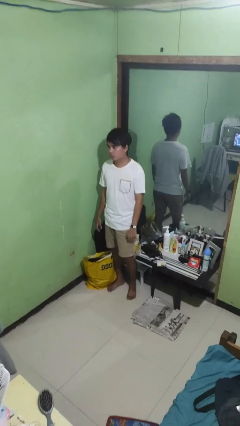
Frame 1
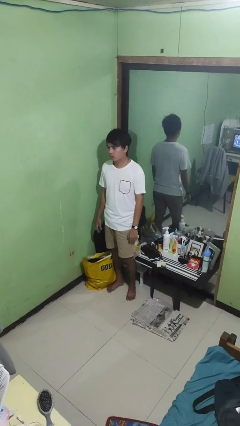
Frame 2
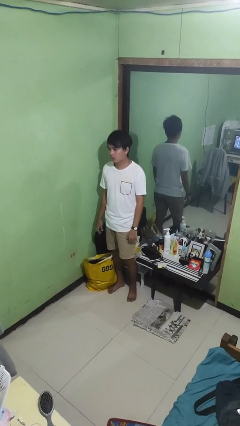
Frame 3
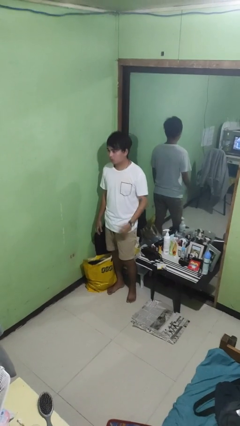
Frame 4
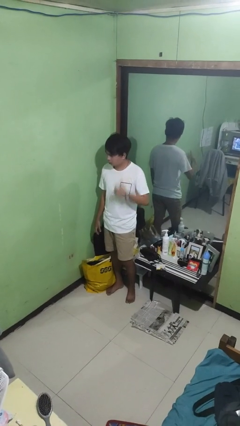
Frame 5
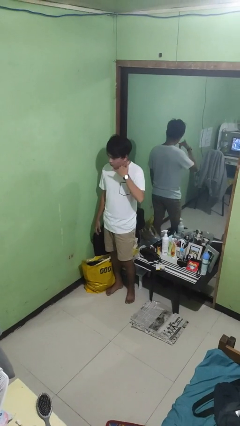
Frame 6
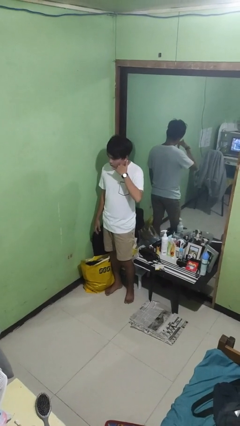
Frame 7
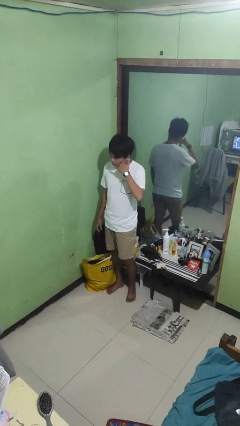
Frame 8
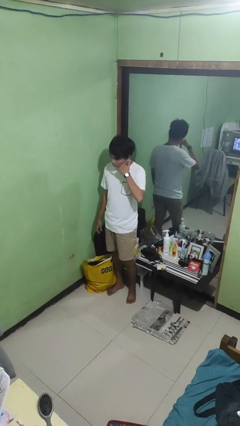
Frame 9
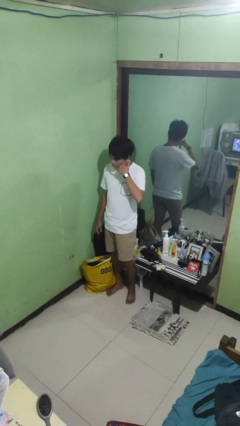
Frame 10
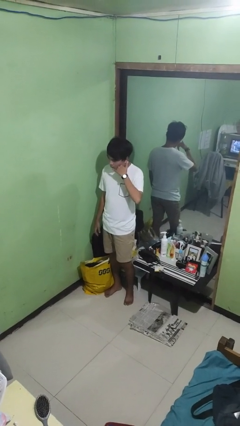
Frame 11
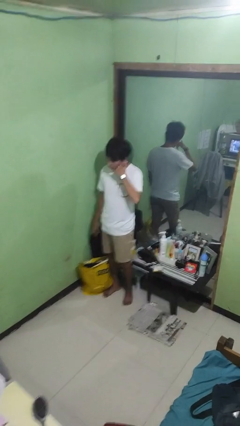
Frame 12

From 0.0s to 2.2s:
person gestures call me

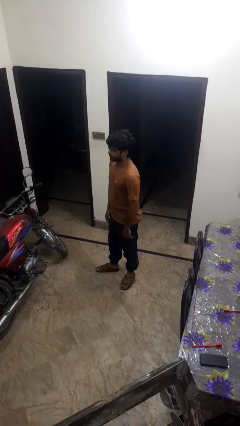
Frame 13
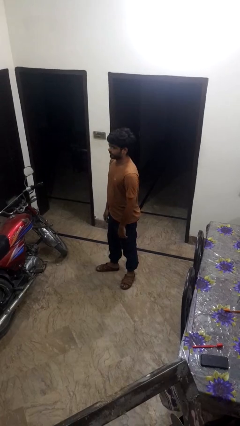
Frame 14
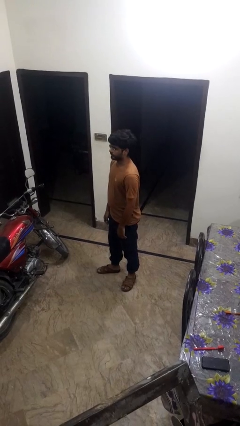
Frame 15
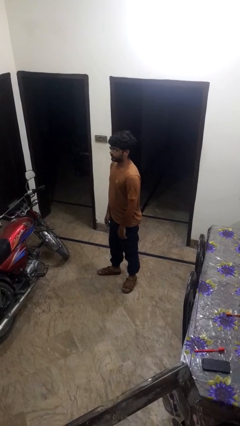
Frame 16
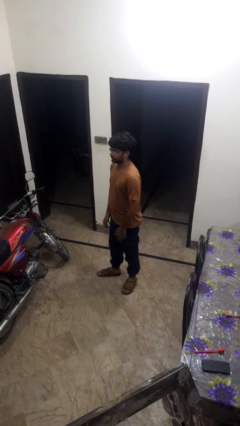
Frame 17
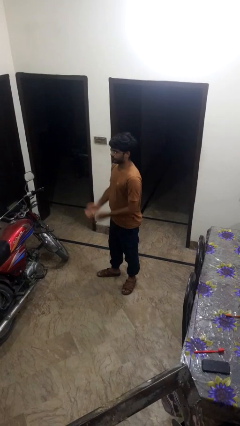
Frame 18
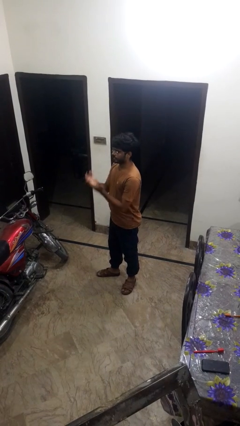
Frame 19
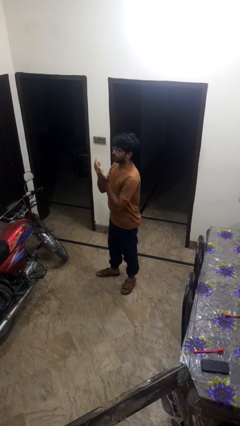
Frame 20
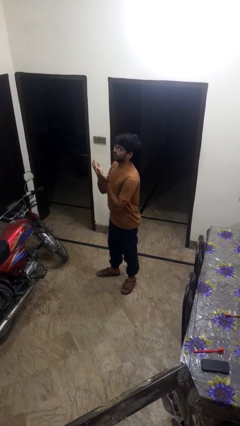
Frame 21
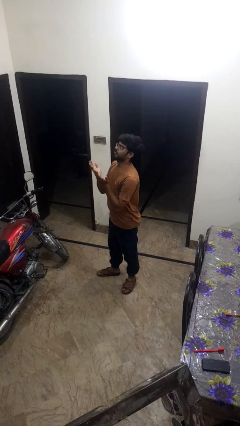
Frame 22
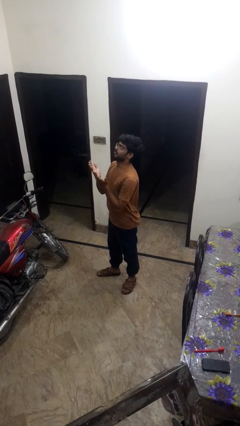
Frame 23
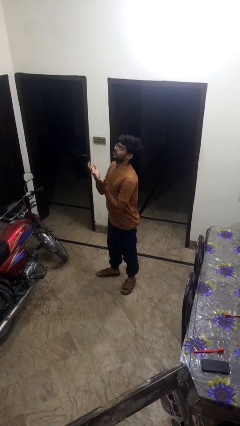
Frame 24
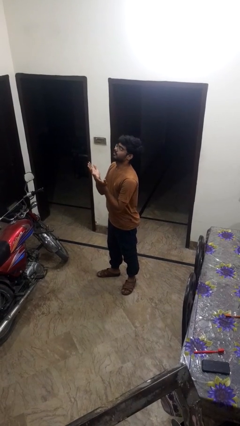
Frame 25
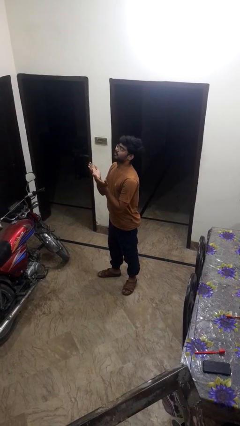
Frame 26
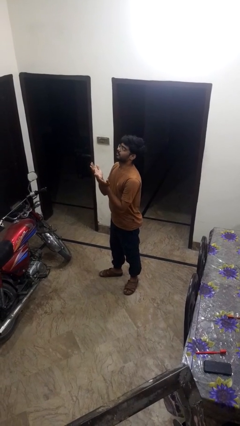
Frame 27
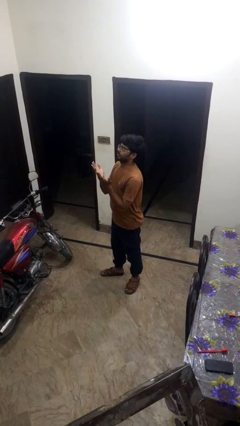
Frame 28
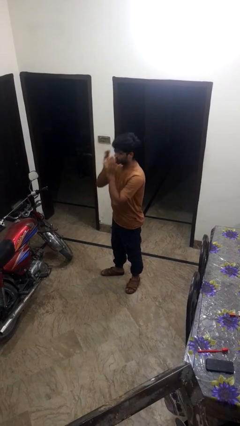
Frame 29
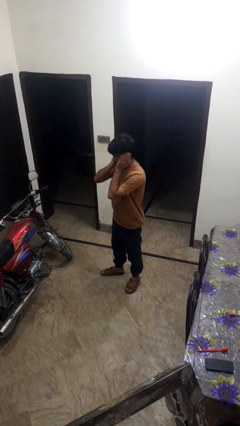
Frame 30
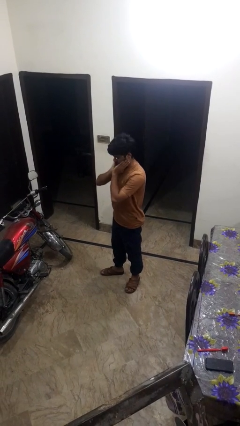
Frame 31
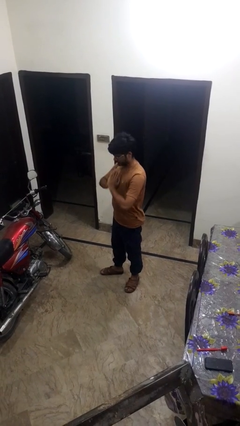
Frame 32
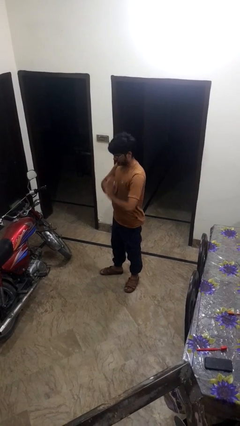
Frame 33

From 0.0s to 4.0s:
person prays

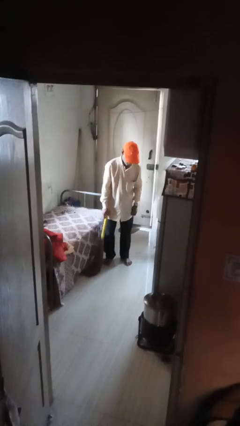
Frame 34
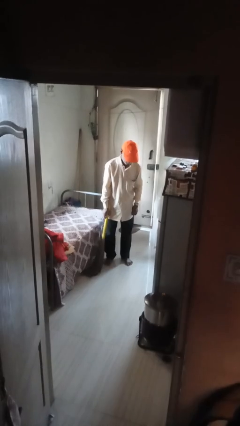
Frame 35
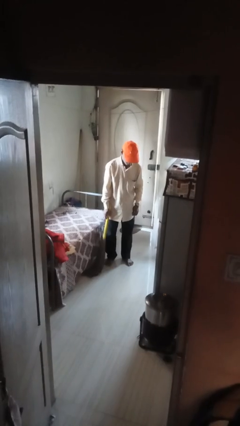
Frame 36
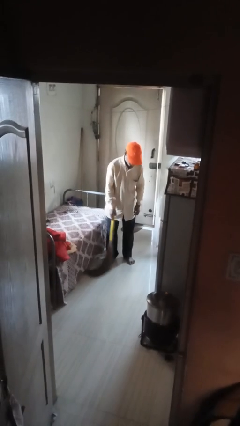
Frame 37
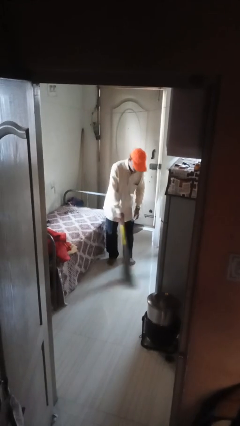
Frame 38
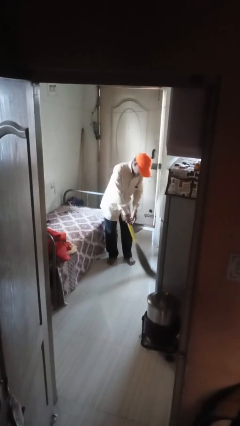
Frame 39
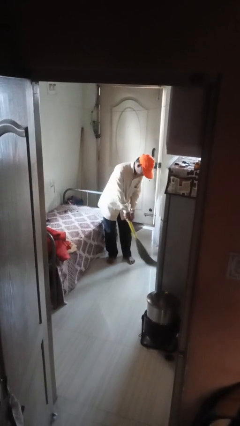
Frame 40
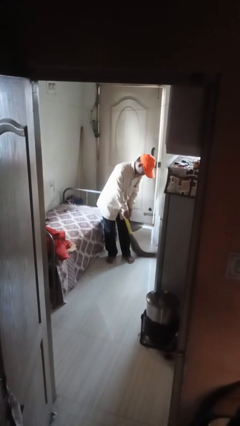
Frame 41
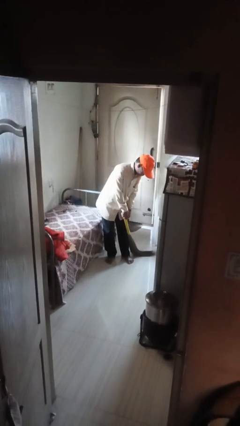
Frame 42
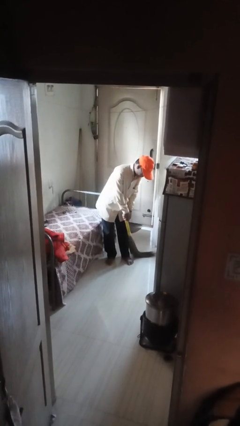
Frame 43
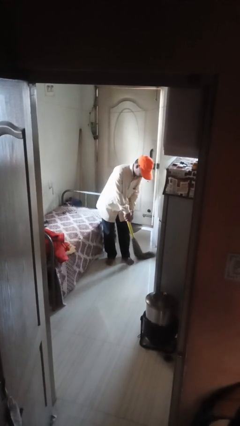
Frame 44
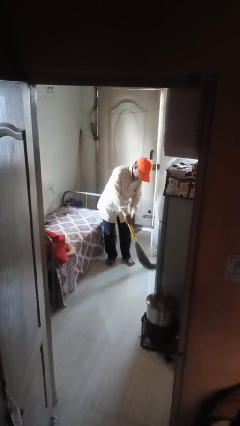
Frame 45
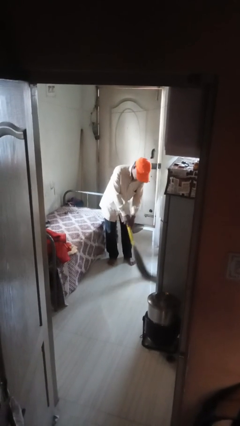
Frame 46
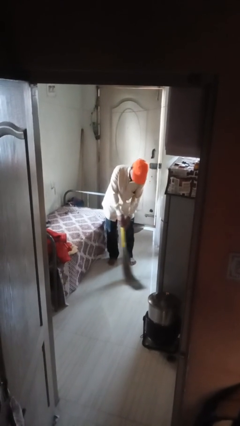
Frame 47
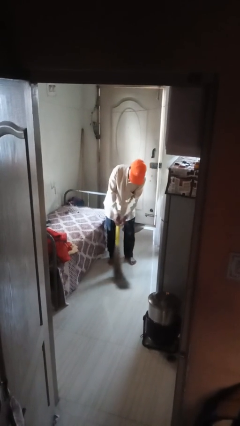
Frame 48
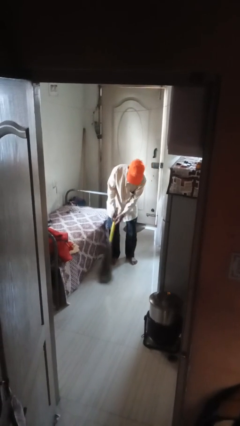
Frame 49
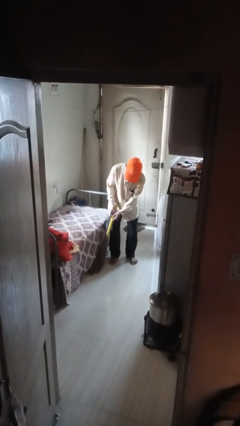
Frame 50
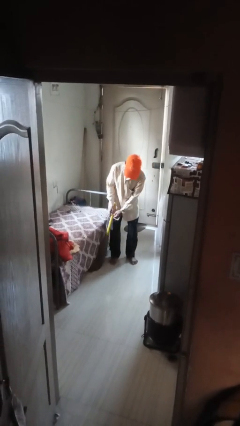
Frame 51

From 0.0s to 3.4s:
person sweeps floor

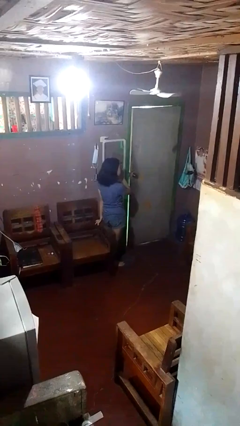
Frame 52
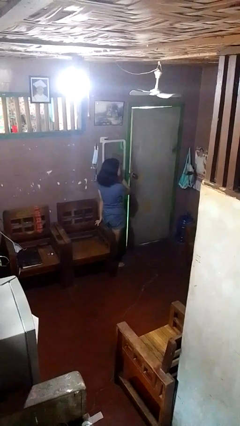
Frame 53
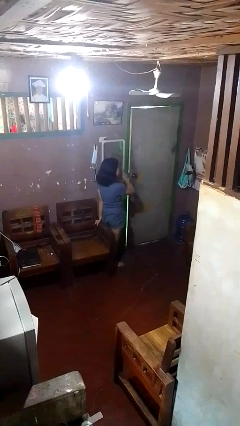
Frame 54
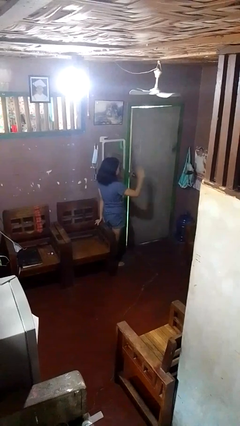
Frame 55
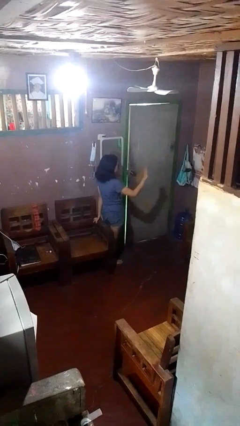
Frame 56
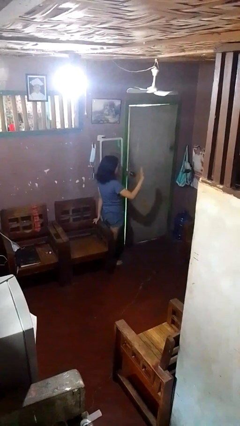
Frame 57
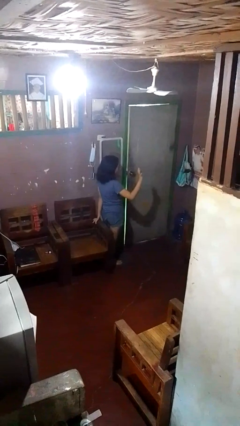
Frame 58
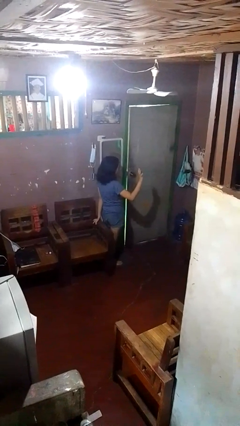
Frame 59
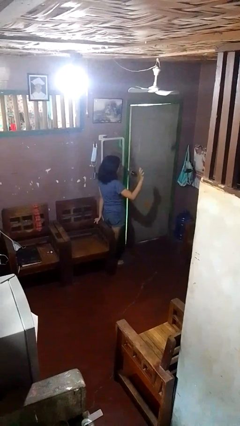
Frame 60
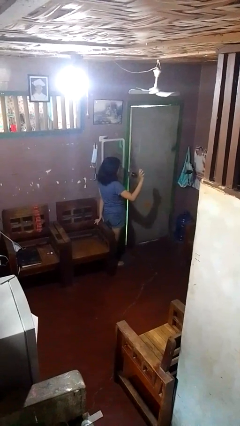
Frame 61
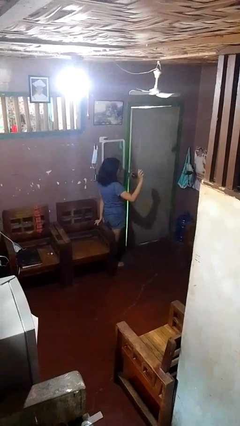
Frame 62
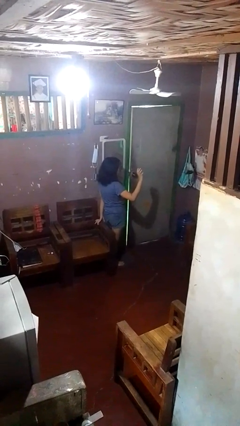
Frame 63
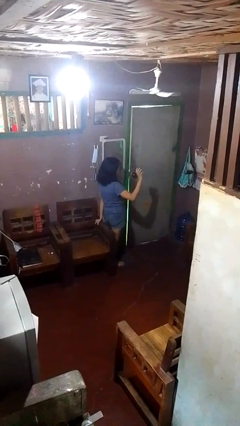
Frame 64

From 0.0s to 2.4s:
person gestures swipe right

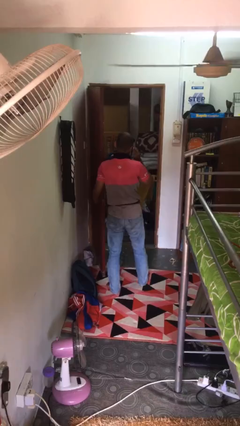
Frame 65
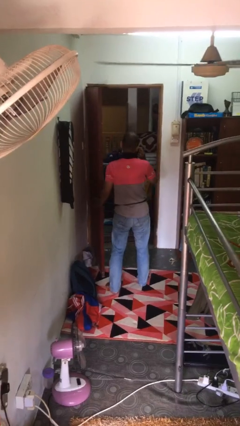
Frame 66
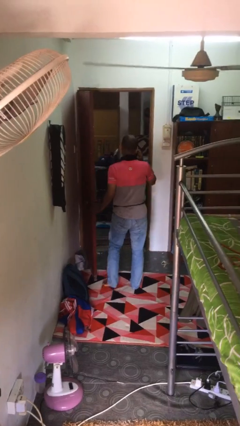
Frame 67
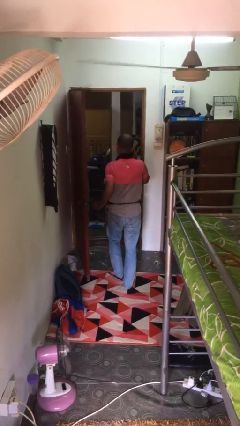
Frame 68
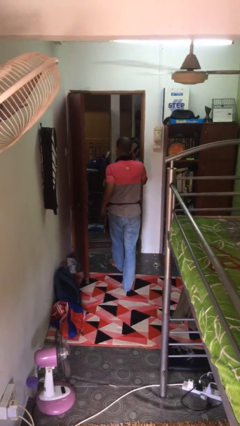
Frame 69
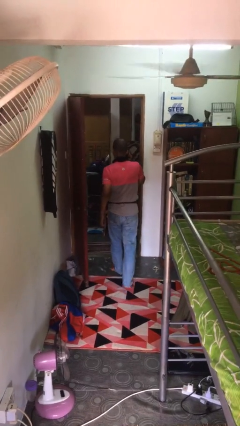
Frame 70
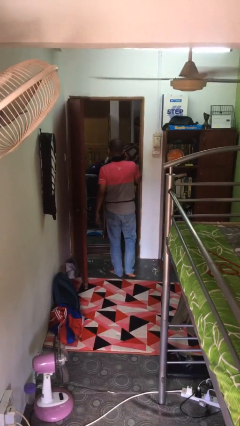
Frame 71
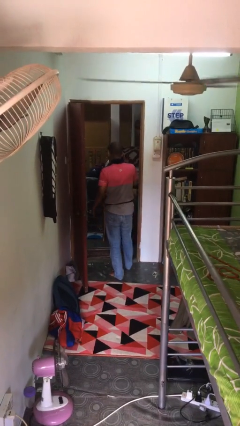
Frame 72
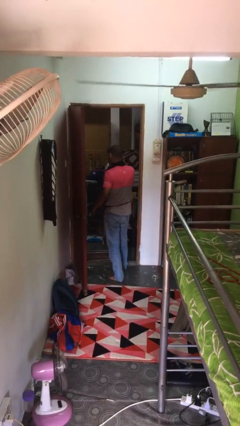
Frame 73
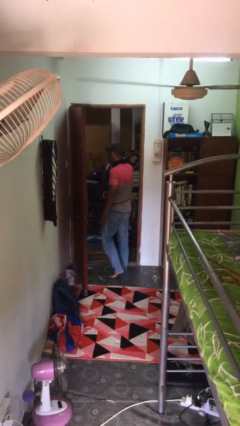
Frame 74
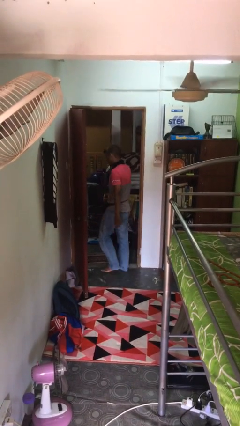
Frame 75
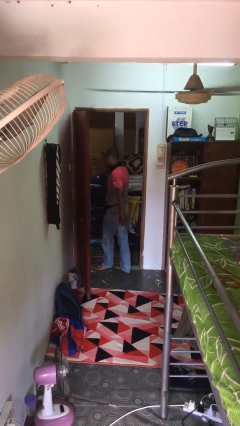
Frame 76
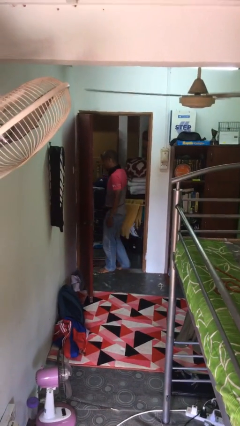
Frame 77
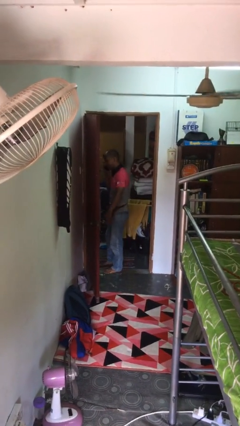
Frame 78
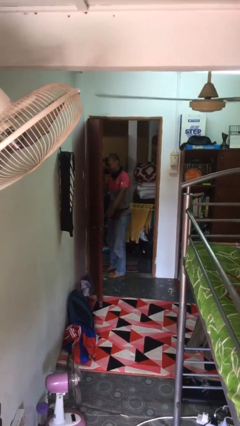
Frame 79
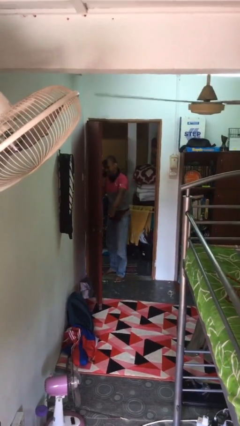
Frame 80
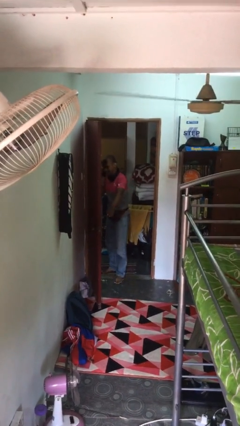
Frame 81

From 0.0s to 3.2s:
person exits scene through structure

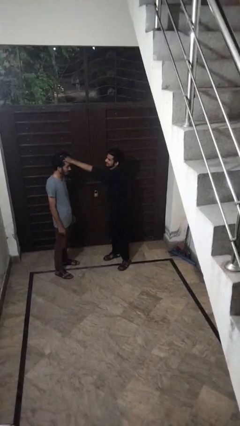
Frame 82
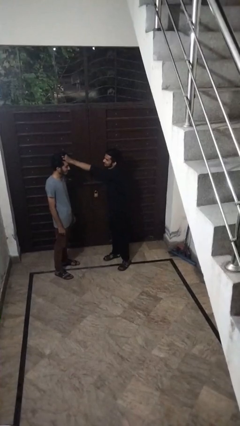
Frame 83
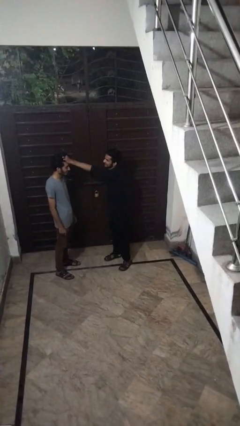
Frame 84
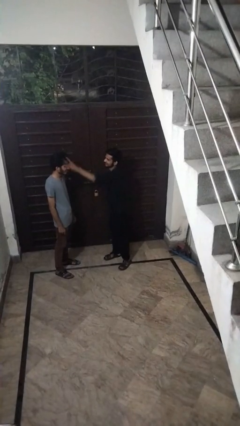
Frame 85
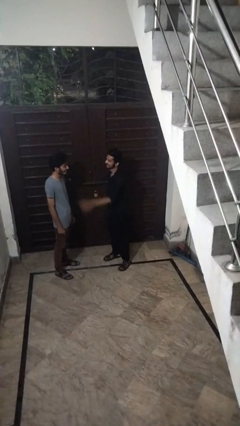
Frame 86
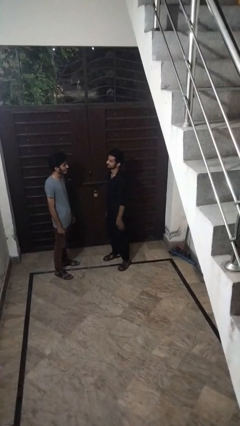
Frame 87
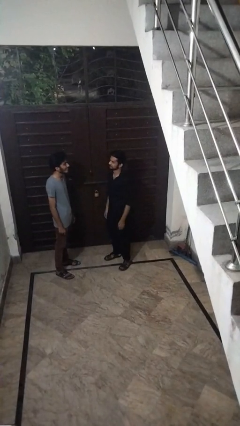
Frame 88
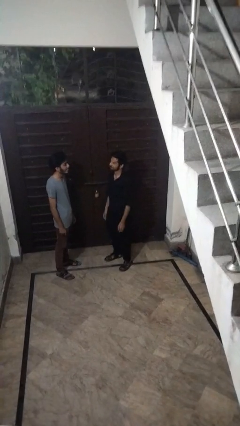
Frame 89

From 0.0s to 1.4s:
person grabs person by hair

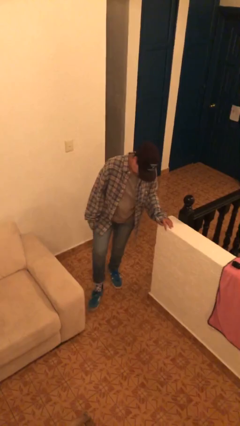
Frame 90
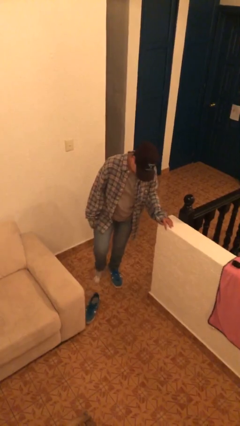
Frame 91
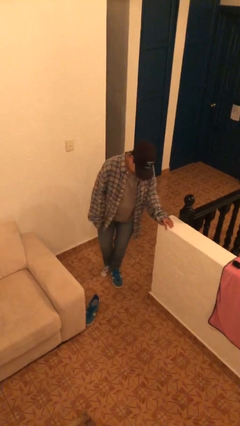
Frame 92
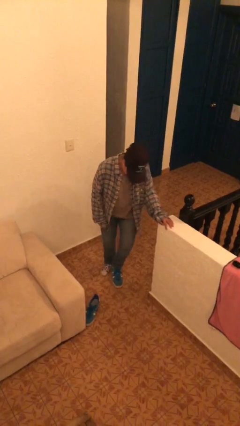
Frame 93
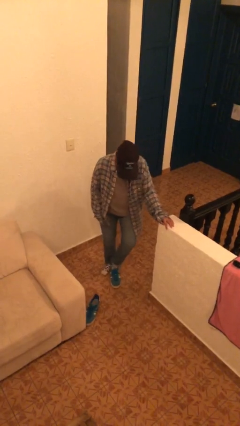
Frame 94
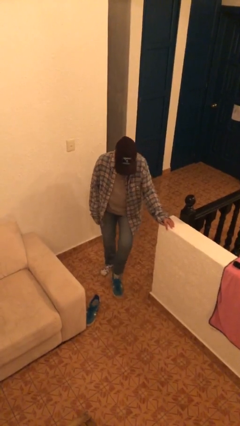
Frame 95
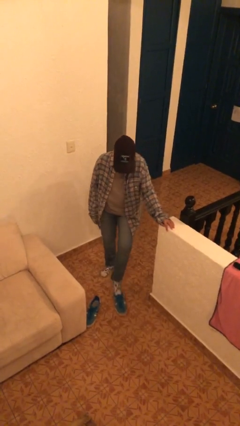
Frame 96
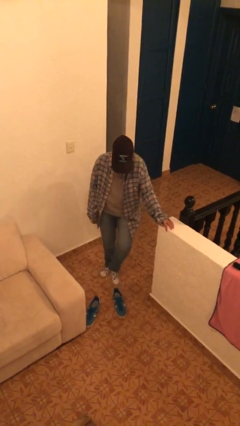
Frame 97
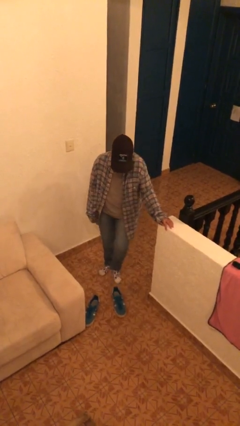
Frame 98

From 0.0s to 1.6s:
person takes off shoes
